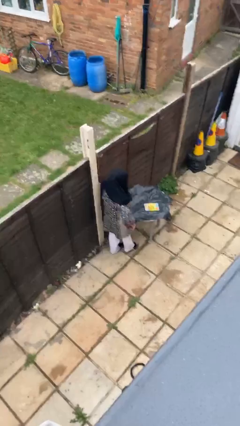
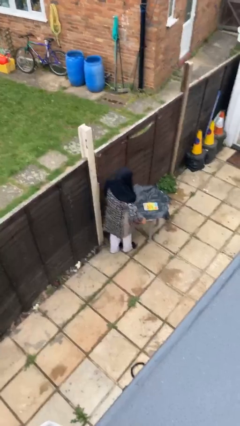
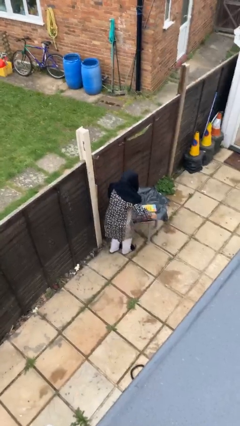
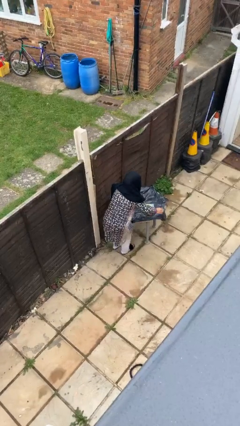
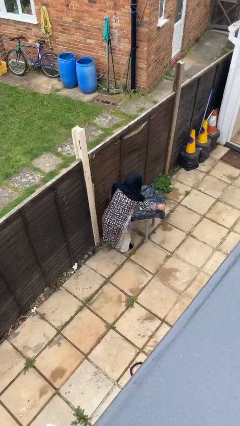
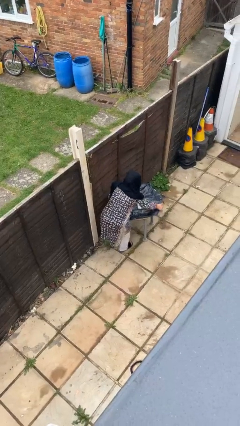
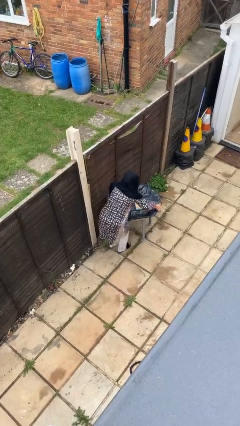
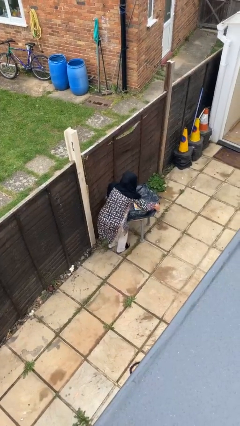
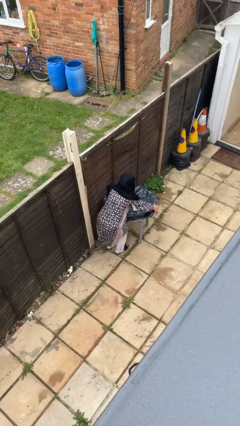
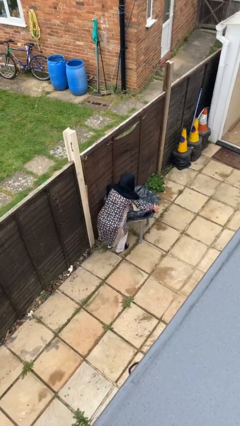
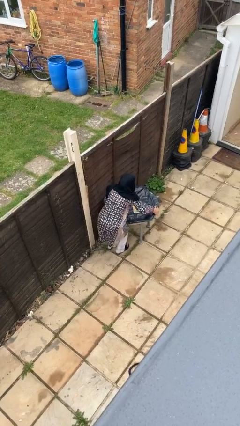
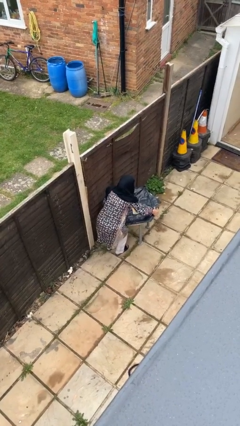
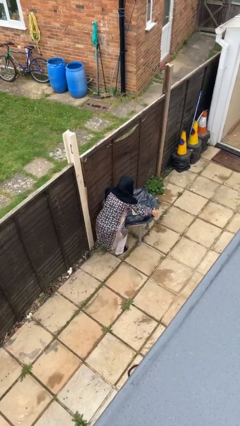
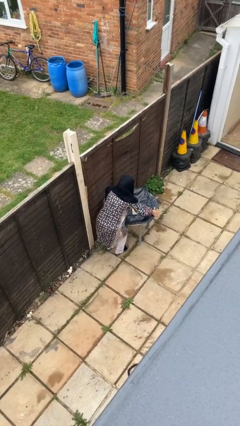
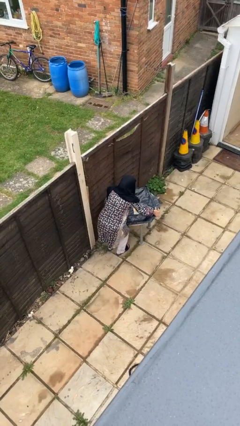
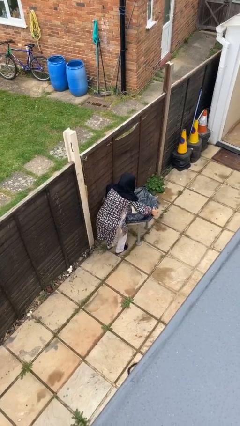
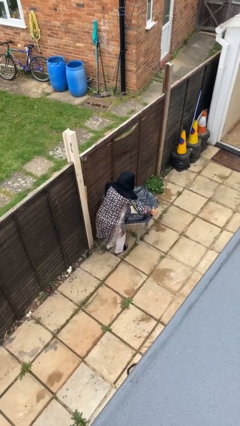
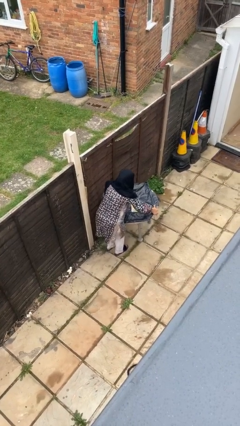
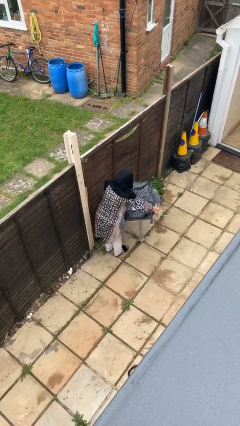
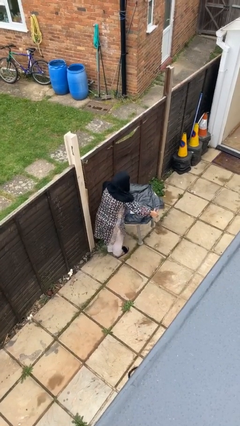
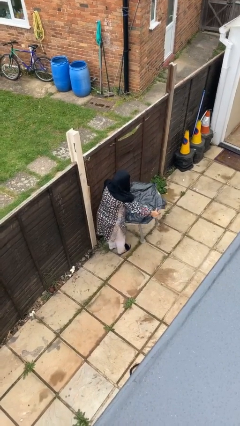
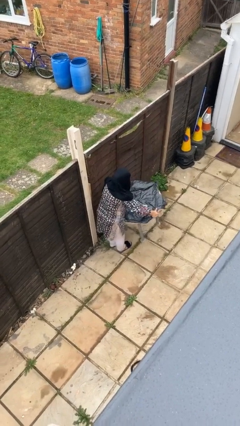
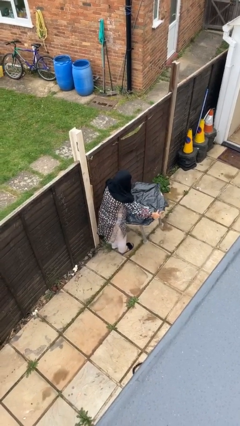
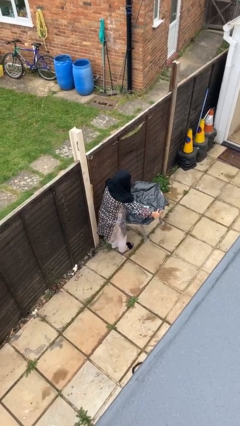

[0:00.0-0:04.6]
person picks up object from floor

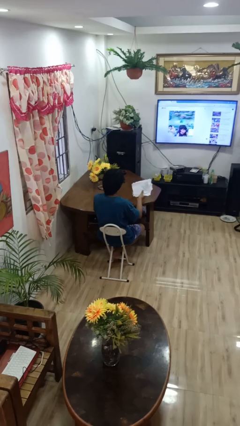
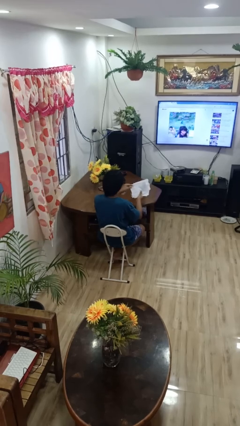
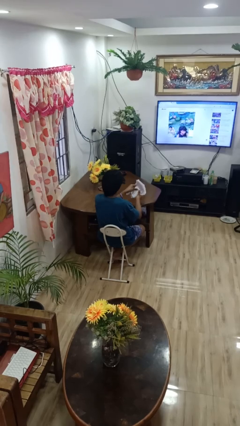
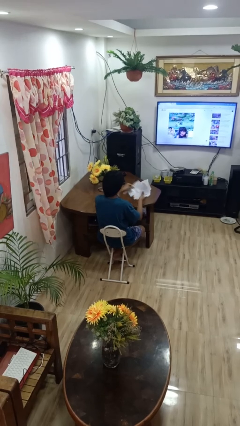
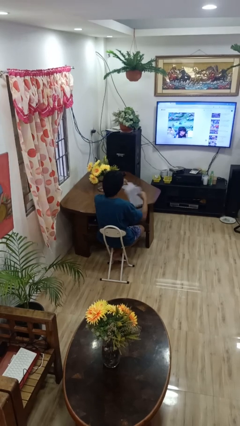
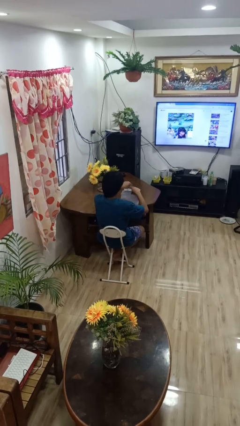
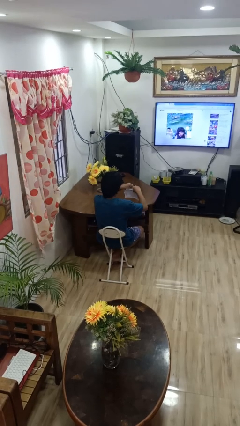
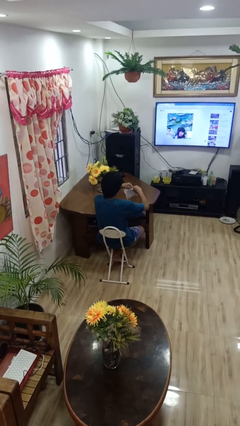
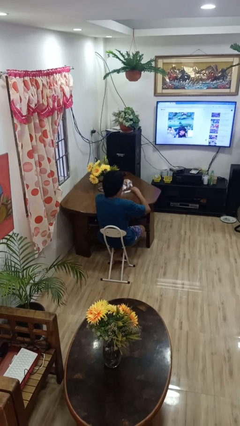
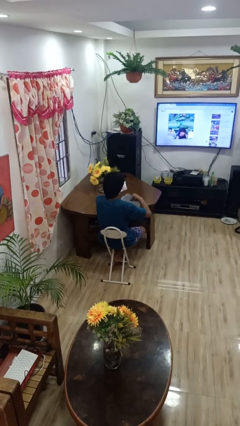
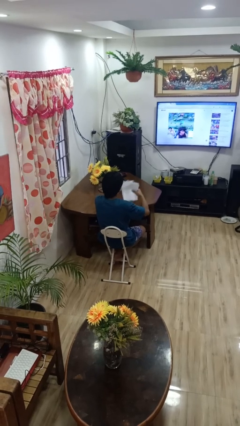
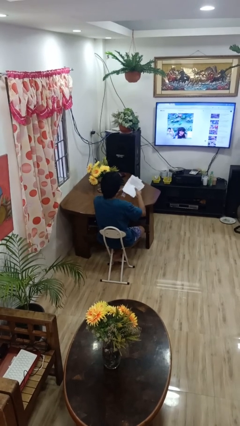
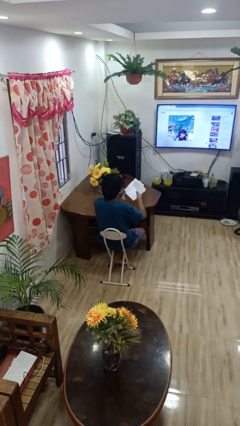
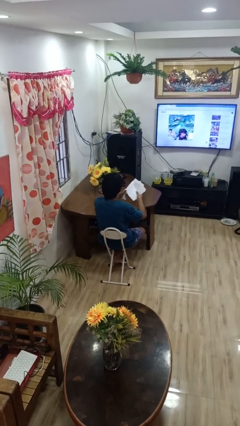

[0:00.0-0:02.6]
person tears paper

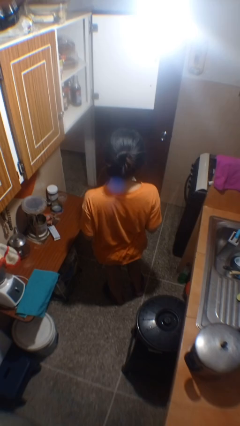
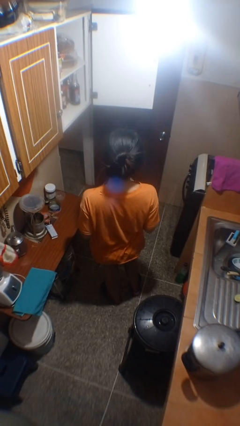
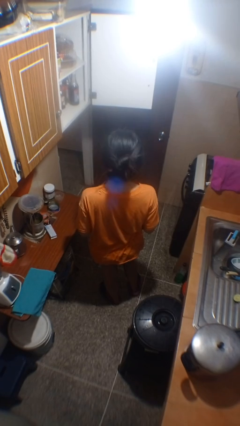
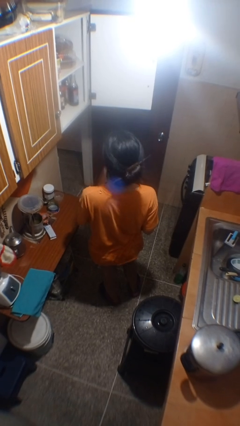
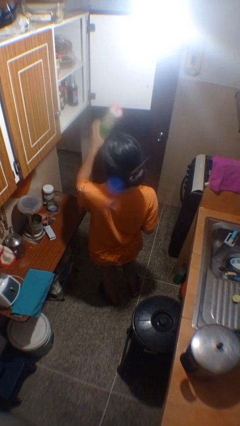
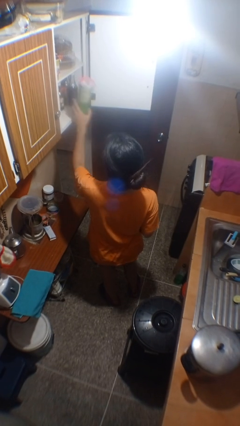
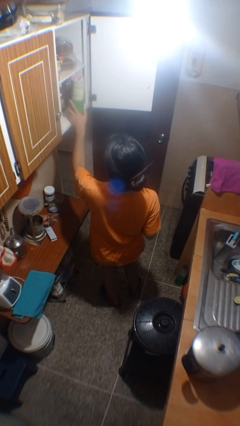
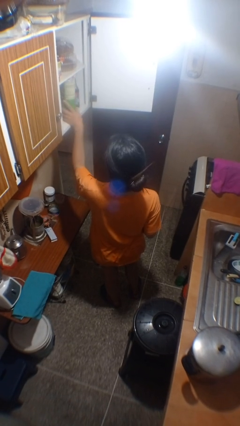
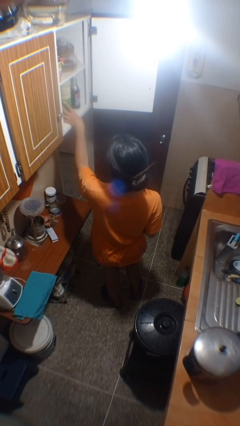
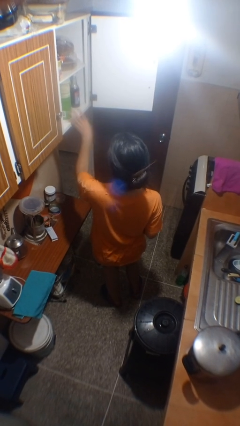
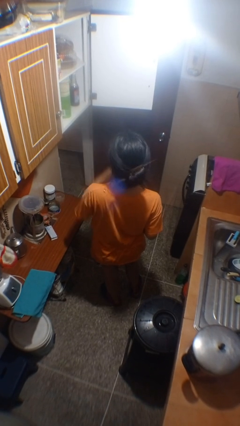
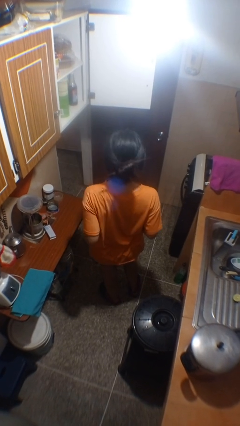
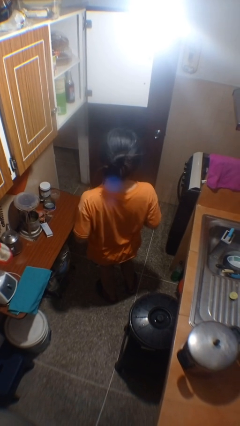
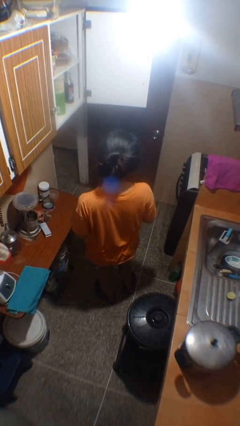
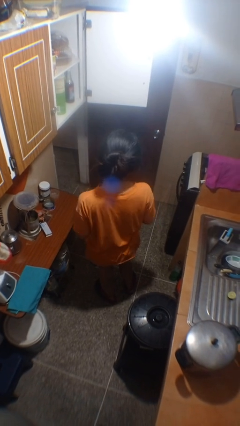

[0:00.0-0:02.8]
person puts object in cabinet

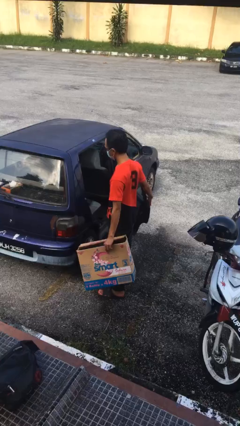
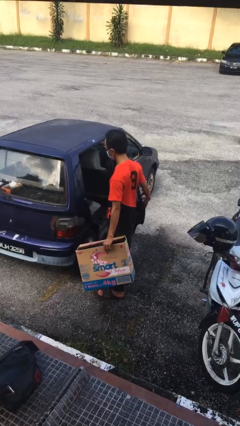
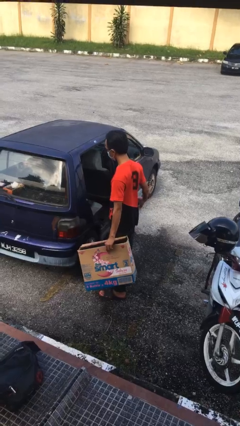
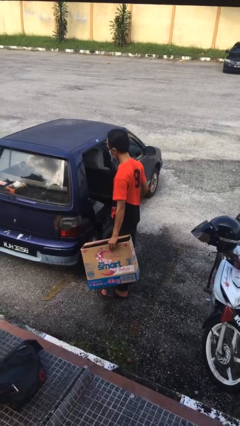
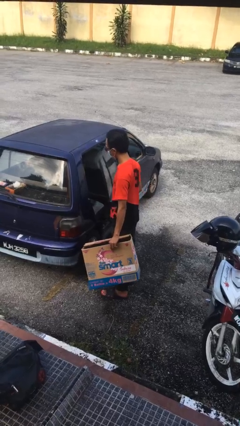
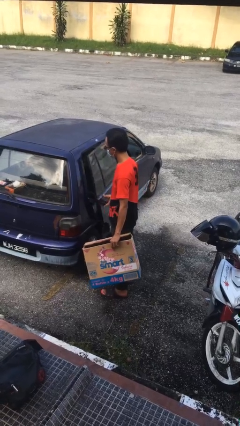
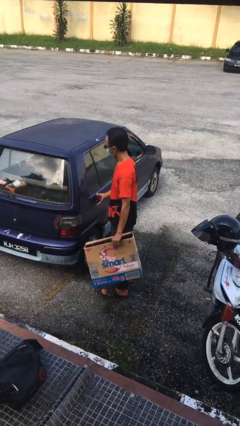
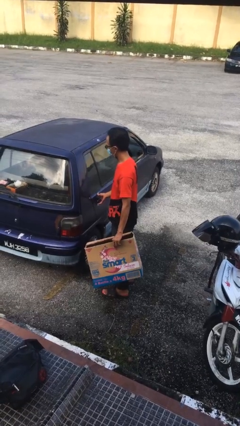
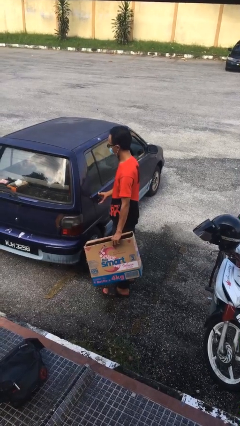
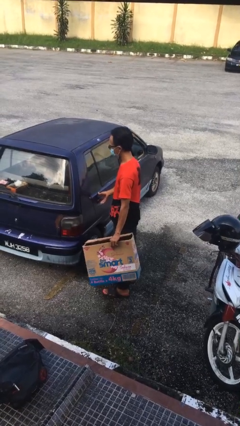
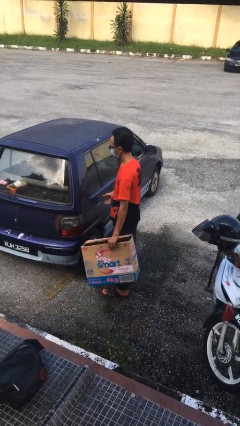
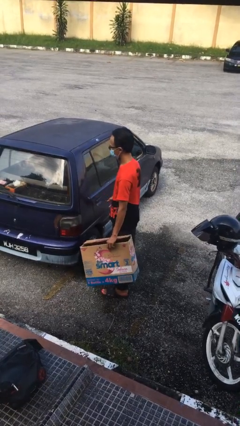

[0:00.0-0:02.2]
person closes car door

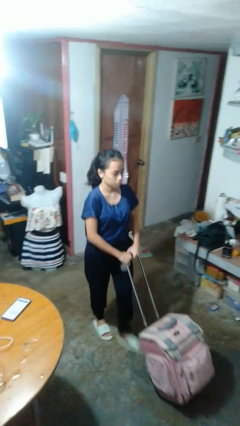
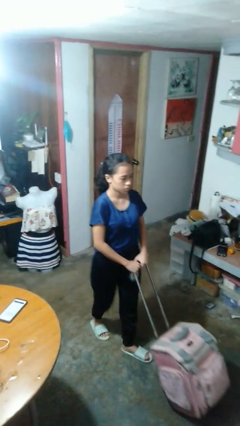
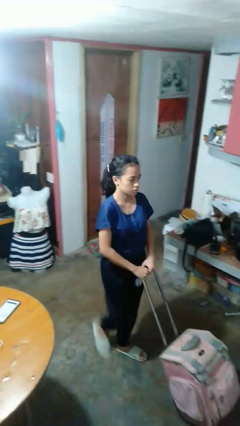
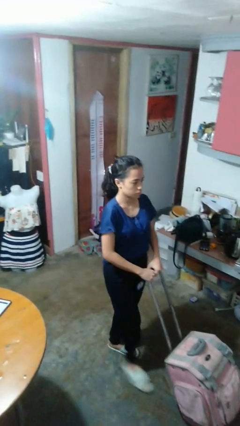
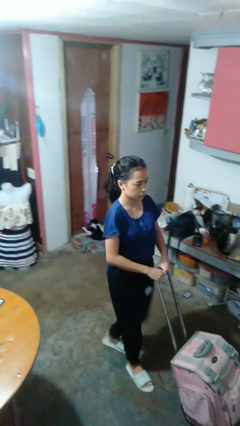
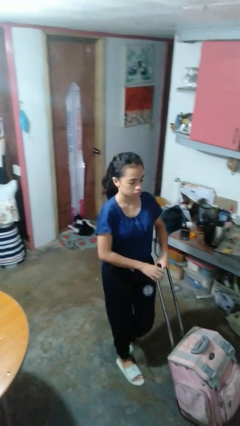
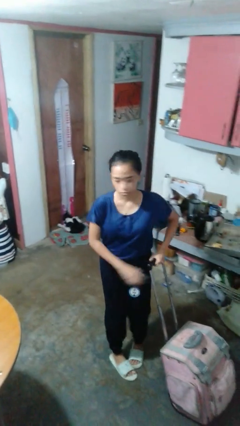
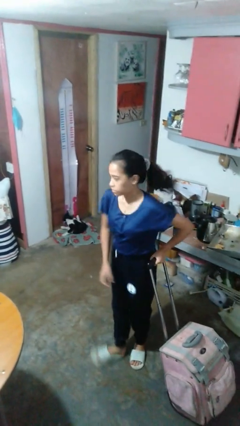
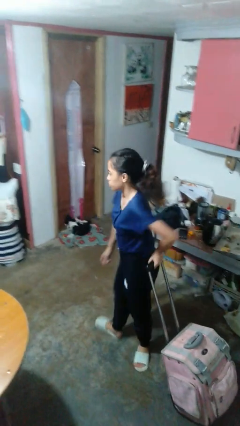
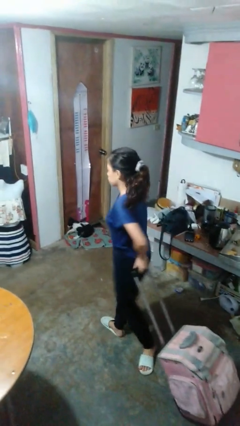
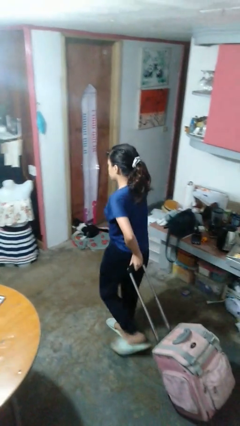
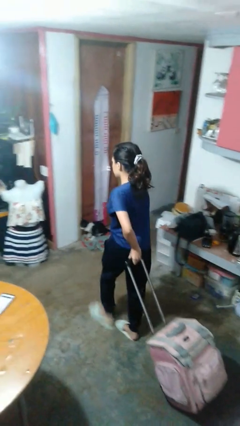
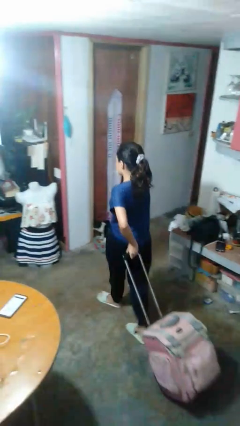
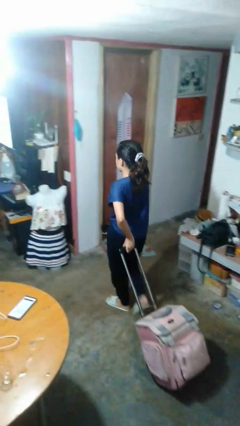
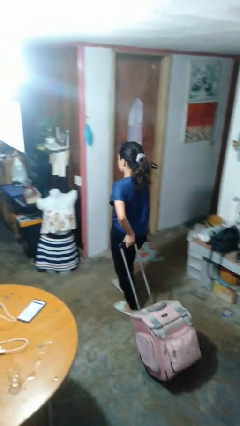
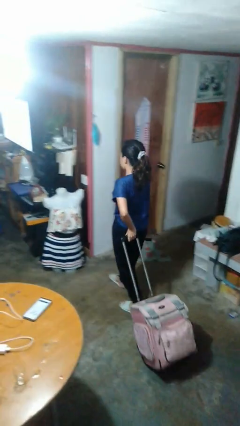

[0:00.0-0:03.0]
person pulls wheeled cart

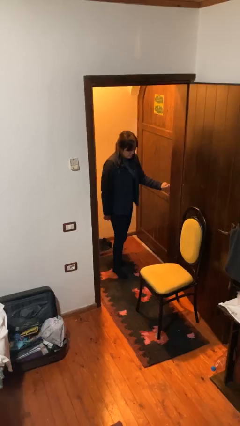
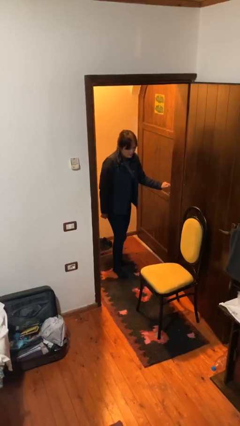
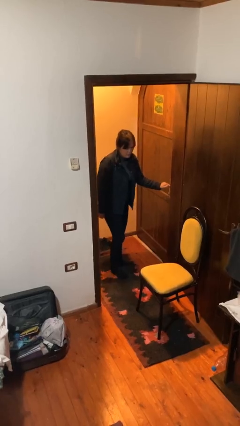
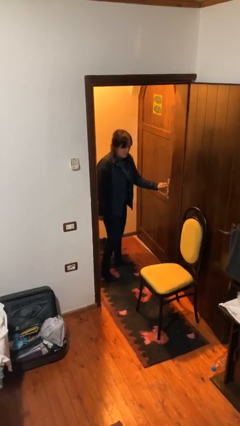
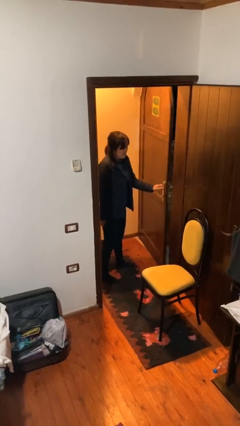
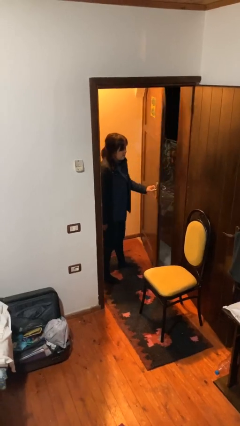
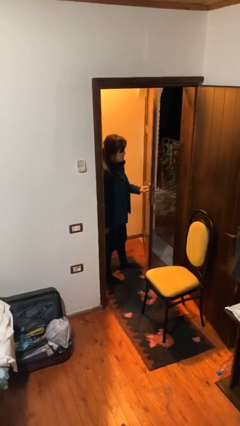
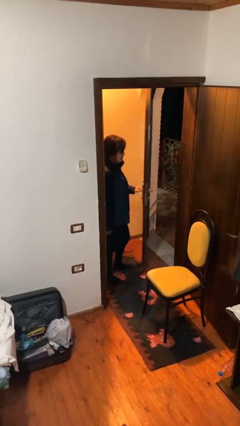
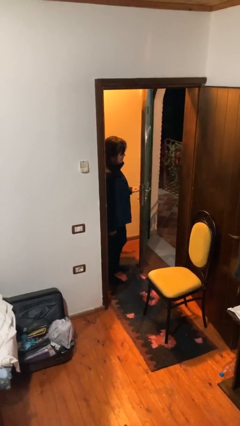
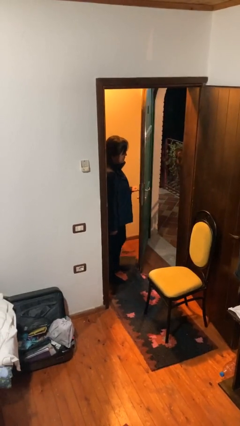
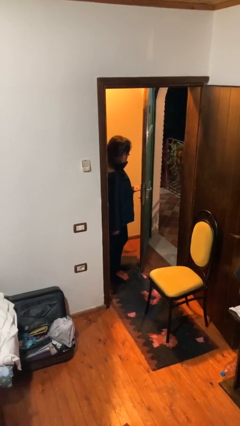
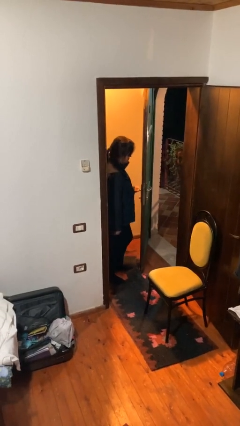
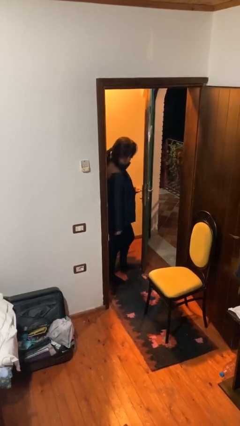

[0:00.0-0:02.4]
person opens facility door
